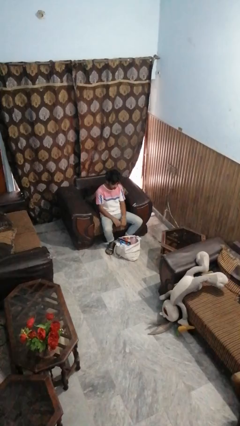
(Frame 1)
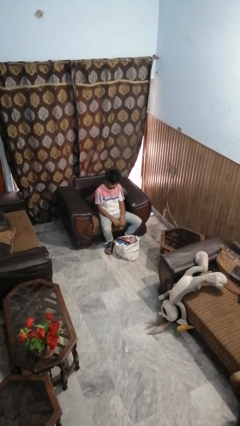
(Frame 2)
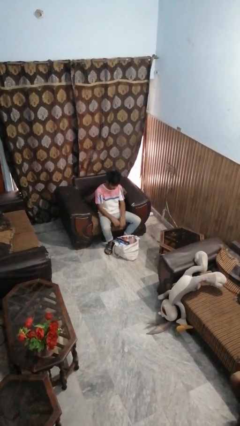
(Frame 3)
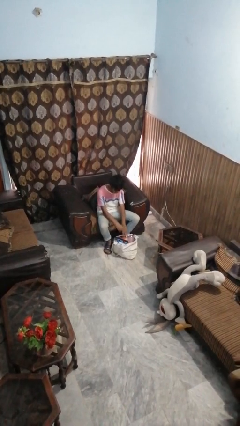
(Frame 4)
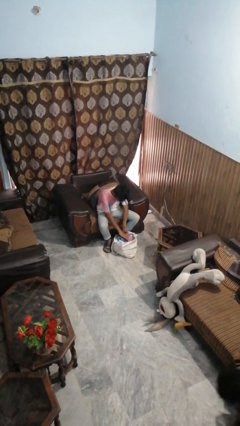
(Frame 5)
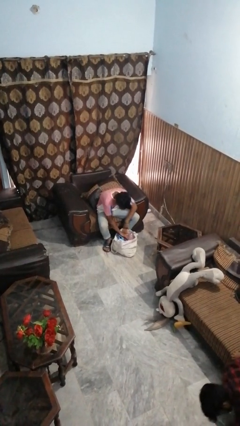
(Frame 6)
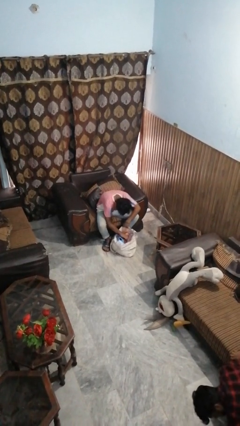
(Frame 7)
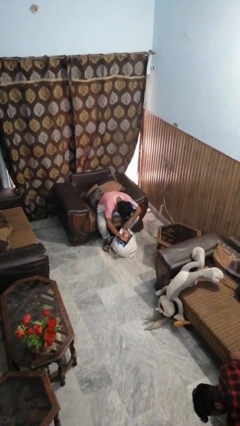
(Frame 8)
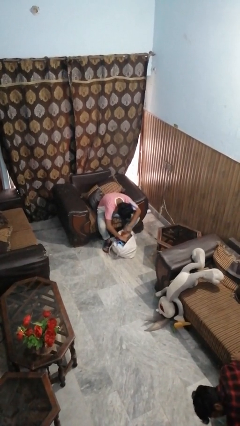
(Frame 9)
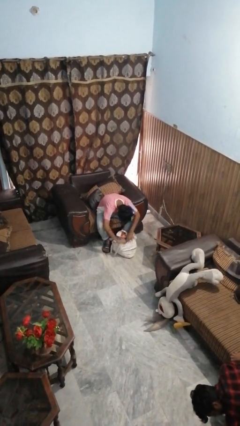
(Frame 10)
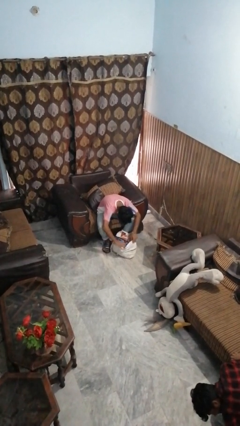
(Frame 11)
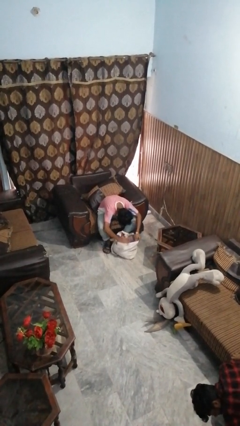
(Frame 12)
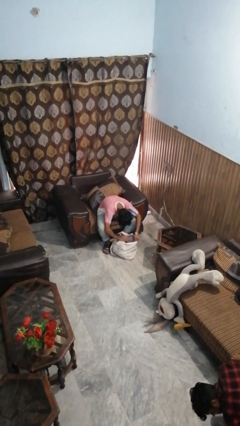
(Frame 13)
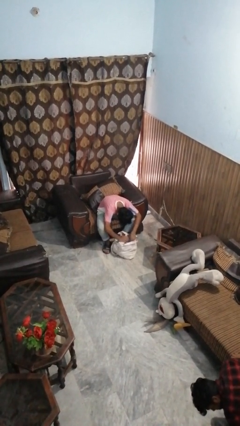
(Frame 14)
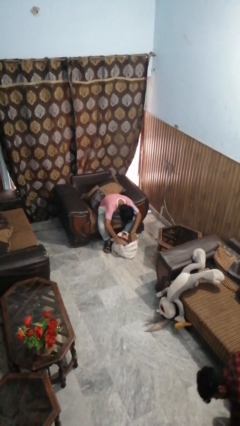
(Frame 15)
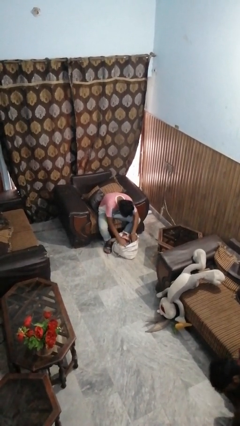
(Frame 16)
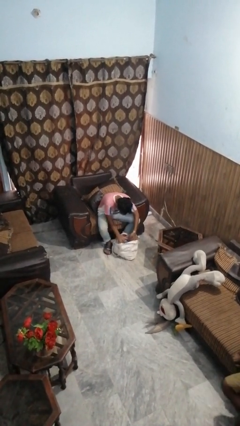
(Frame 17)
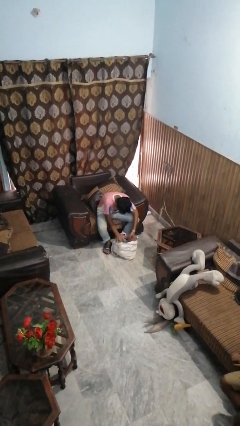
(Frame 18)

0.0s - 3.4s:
person searches in bag

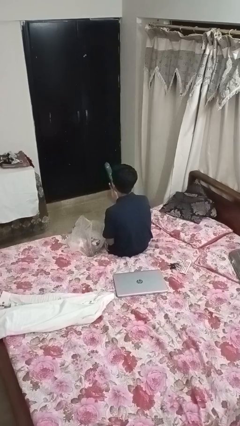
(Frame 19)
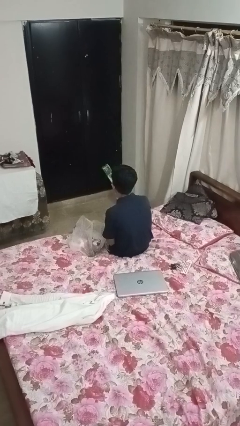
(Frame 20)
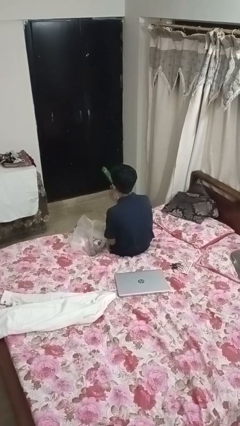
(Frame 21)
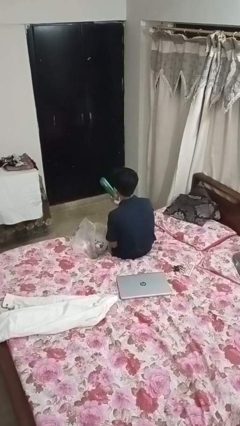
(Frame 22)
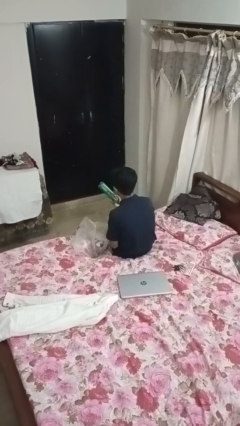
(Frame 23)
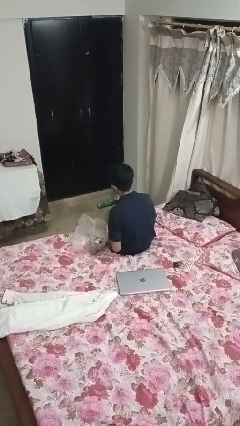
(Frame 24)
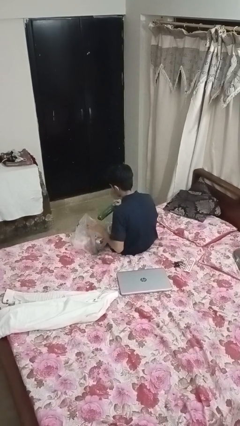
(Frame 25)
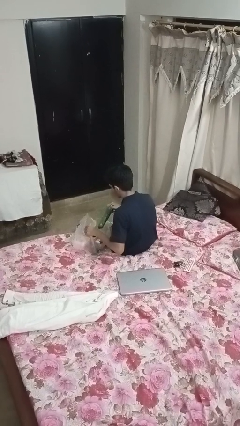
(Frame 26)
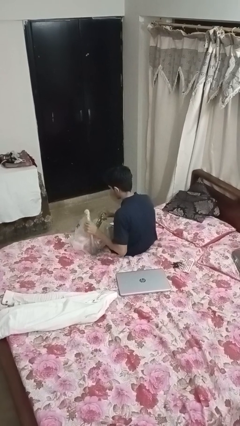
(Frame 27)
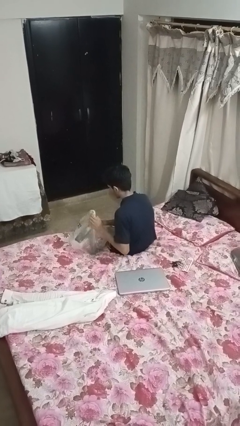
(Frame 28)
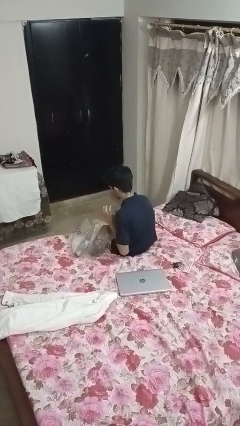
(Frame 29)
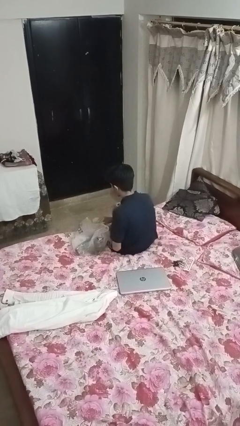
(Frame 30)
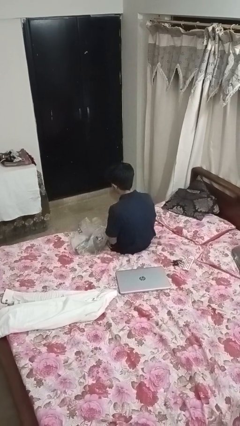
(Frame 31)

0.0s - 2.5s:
person puts object into bag

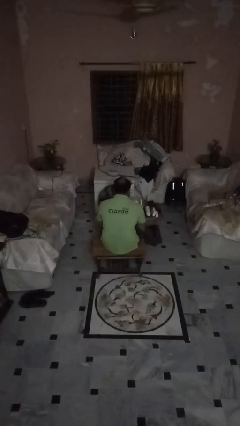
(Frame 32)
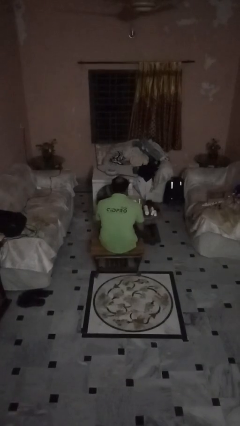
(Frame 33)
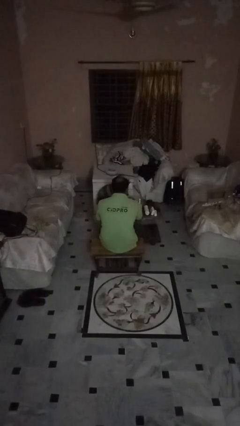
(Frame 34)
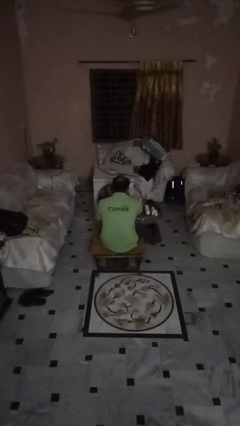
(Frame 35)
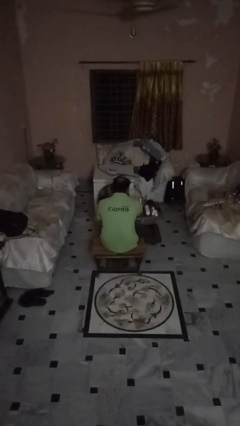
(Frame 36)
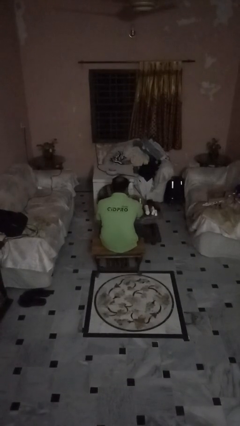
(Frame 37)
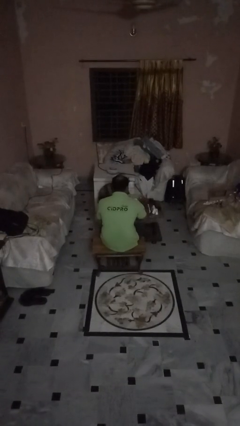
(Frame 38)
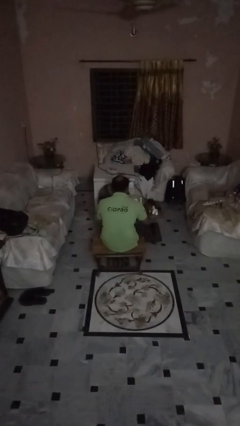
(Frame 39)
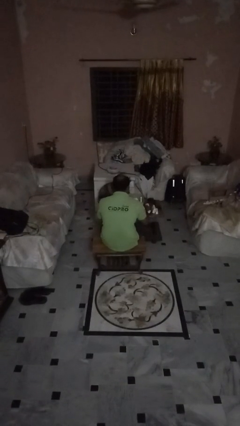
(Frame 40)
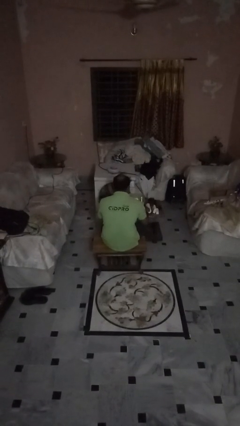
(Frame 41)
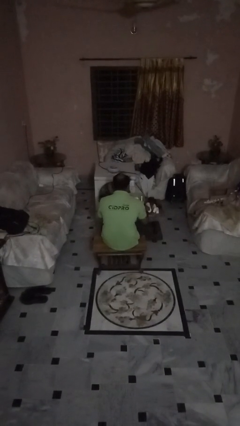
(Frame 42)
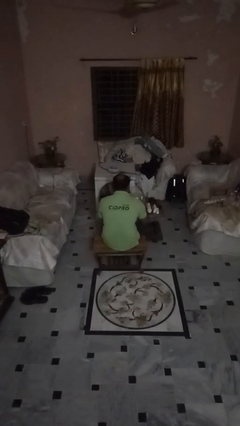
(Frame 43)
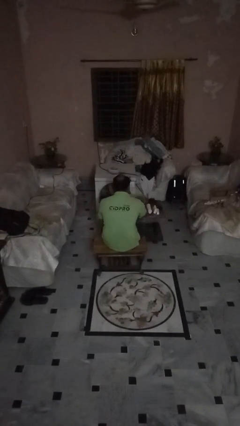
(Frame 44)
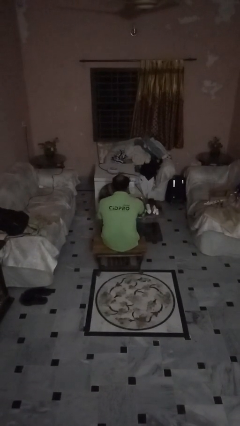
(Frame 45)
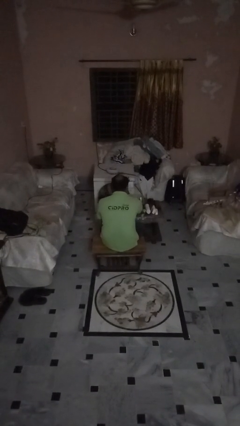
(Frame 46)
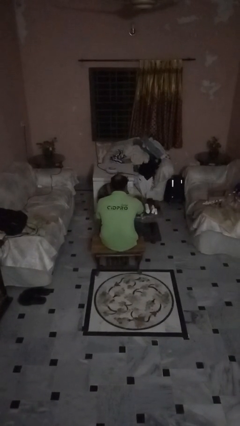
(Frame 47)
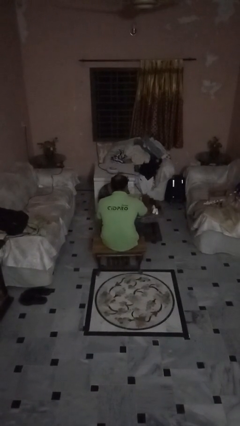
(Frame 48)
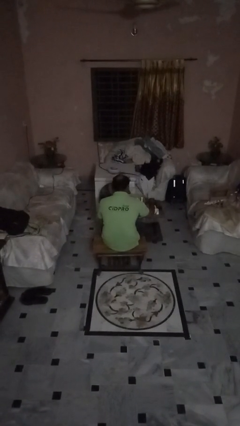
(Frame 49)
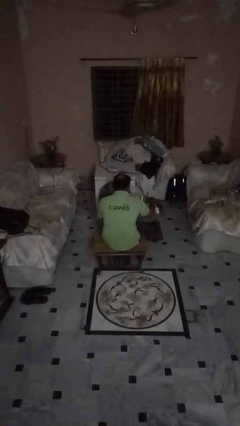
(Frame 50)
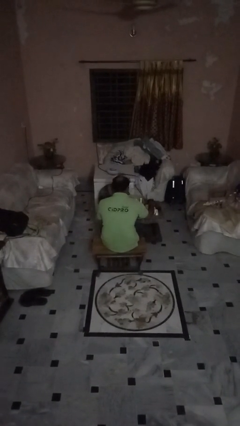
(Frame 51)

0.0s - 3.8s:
person unloads box onto table

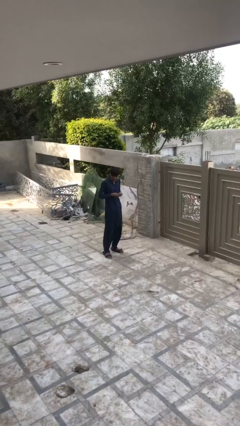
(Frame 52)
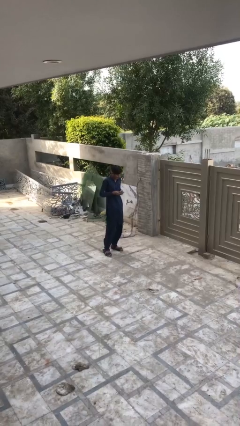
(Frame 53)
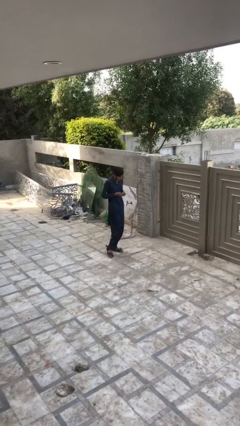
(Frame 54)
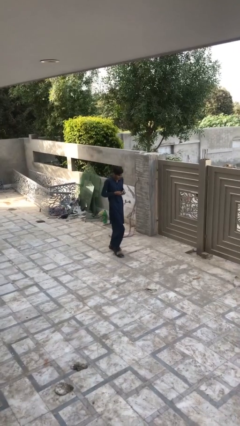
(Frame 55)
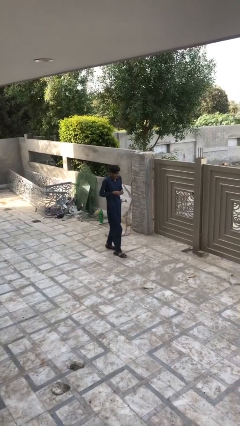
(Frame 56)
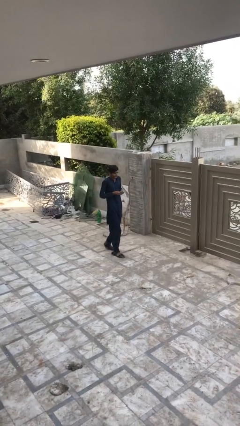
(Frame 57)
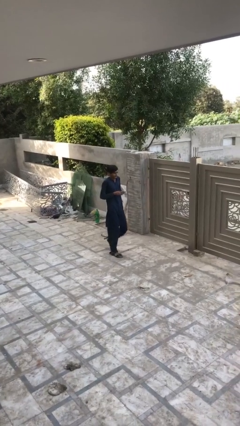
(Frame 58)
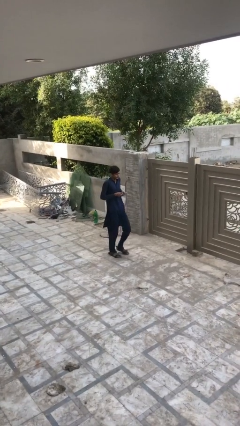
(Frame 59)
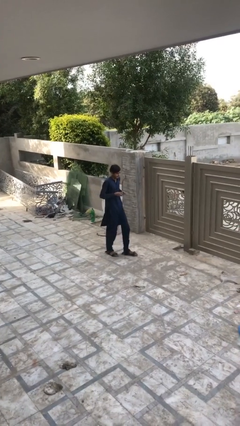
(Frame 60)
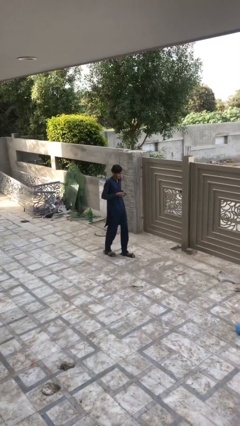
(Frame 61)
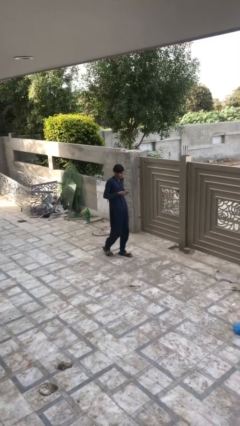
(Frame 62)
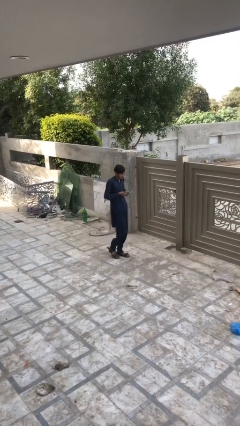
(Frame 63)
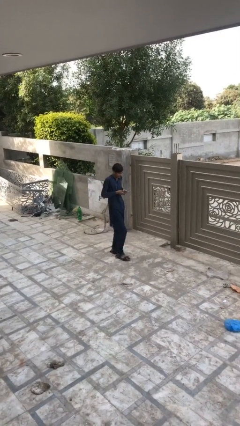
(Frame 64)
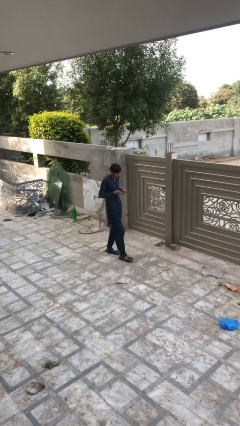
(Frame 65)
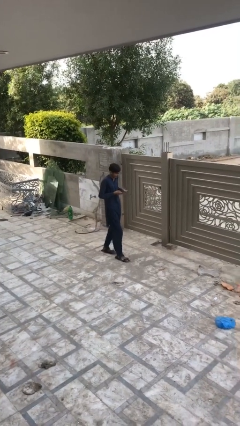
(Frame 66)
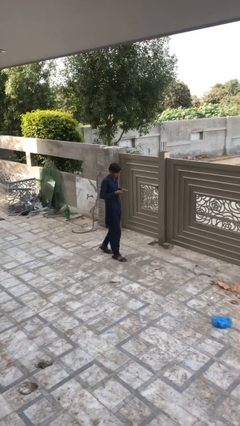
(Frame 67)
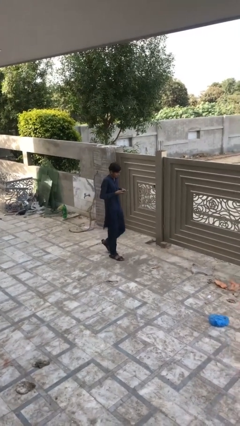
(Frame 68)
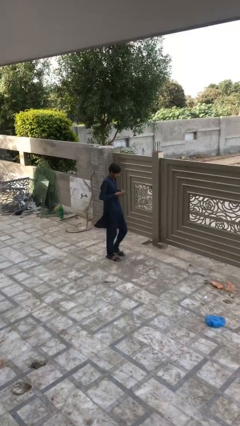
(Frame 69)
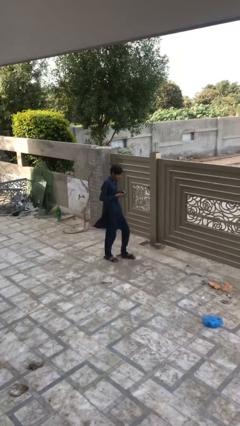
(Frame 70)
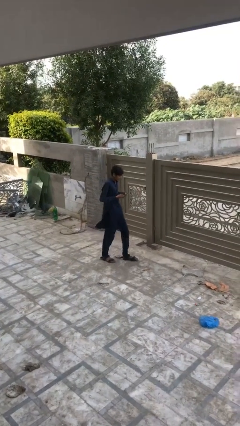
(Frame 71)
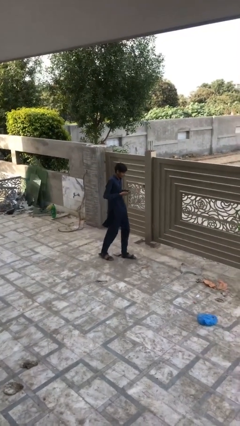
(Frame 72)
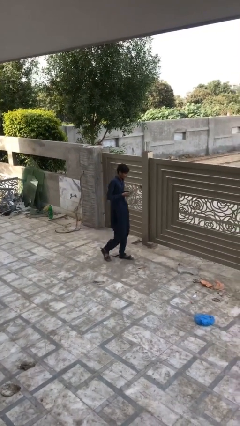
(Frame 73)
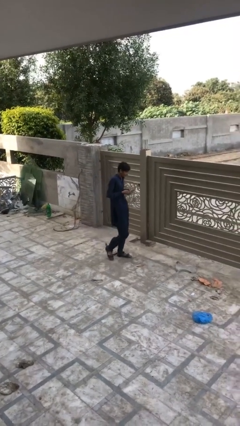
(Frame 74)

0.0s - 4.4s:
person texts on phone

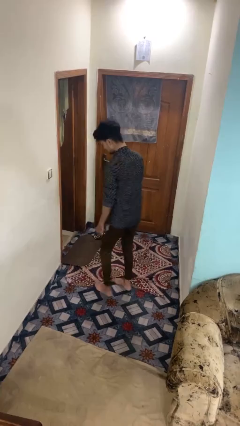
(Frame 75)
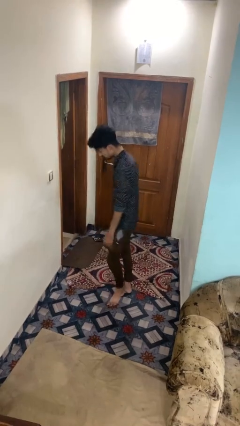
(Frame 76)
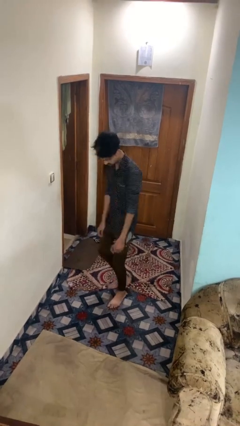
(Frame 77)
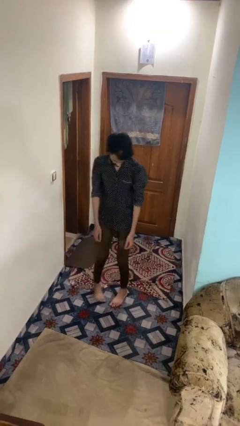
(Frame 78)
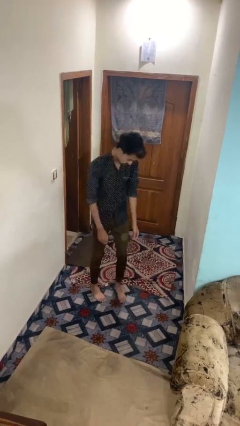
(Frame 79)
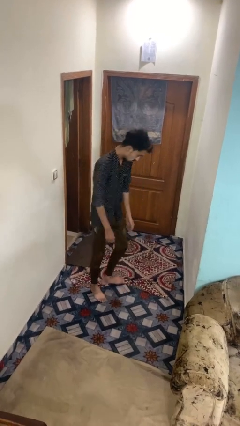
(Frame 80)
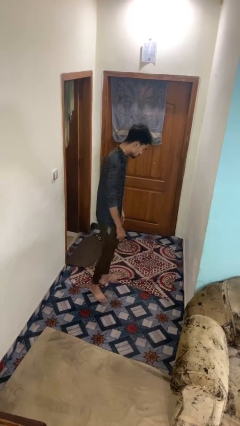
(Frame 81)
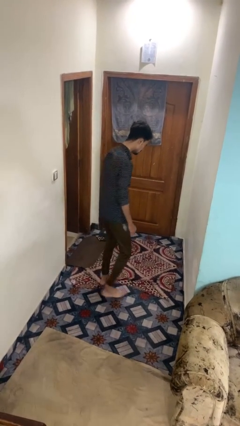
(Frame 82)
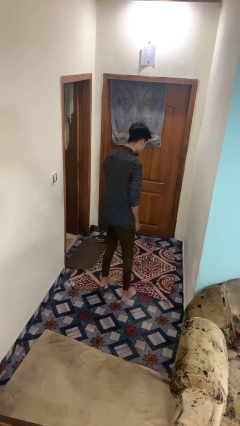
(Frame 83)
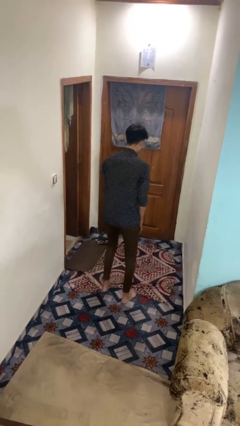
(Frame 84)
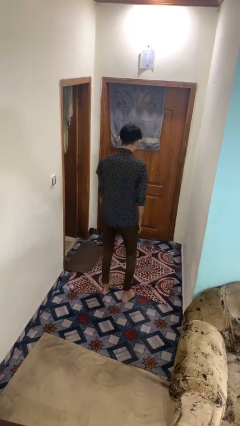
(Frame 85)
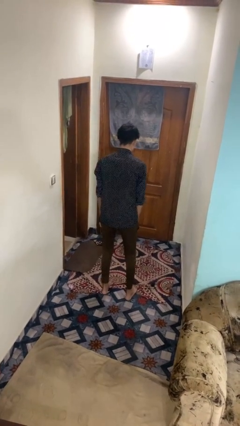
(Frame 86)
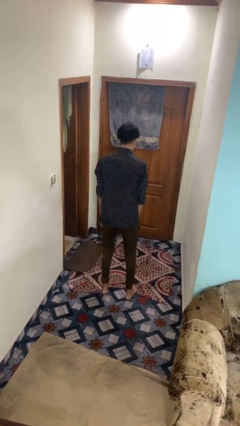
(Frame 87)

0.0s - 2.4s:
person twirls

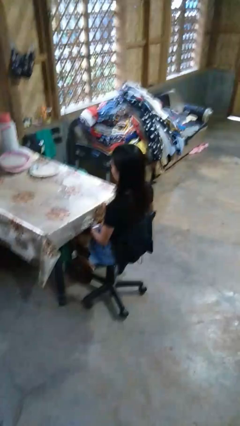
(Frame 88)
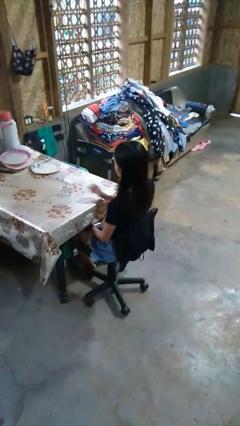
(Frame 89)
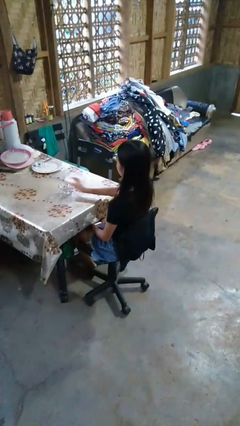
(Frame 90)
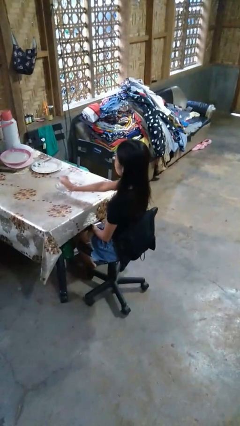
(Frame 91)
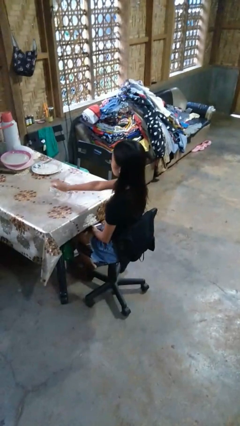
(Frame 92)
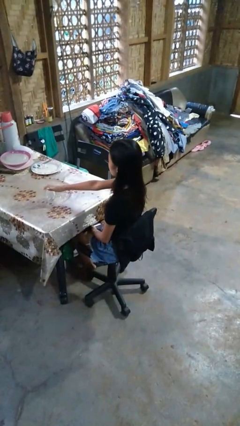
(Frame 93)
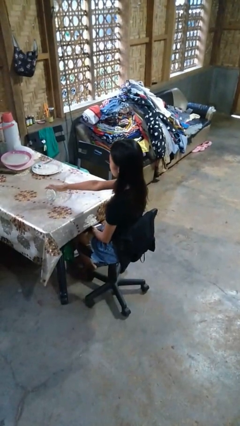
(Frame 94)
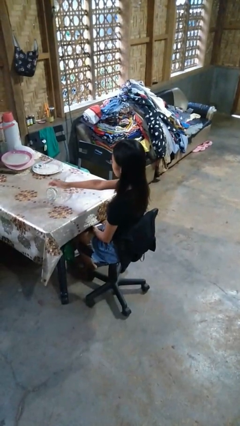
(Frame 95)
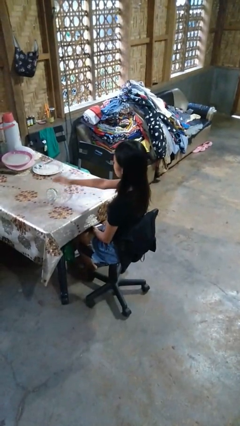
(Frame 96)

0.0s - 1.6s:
person knocks over glass
